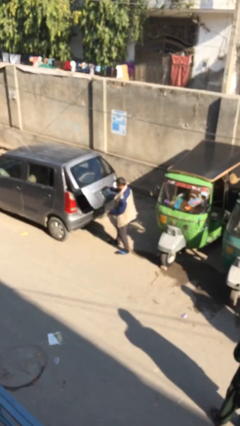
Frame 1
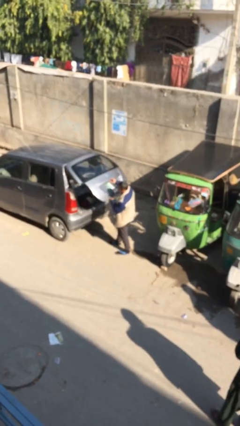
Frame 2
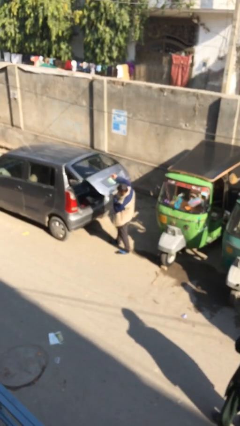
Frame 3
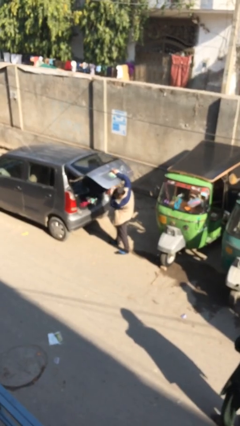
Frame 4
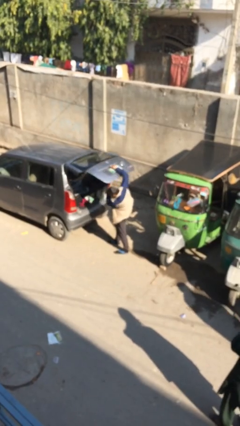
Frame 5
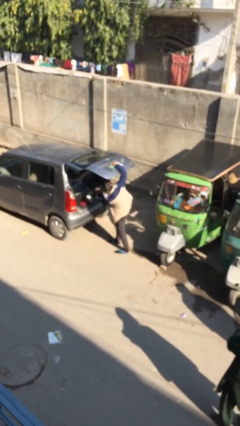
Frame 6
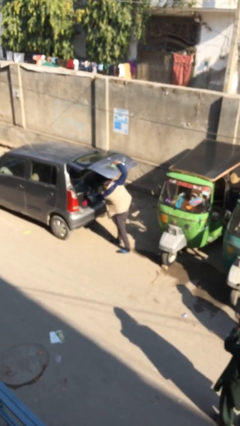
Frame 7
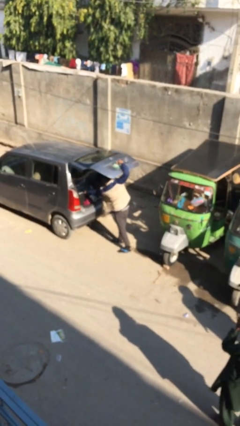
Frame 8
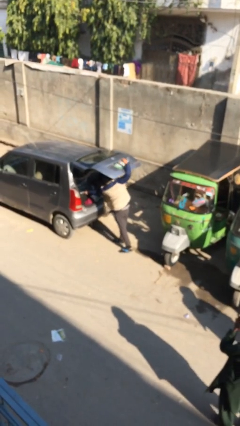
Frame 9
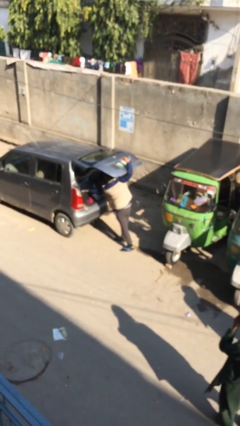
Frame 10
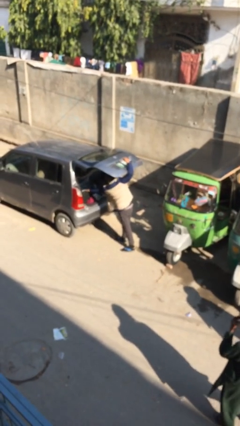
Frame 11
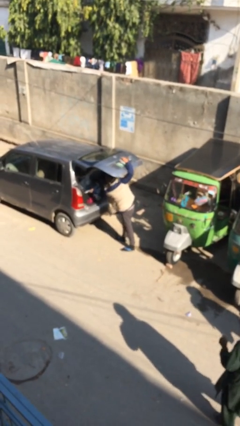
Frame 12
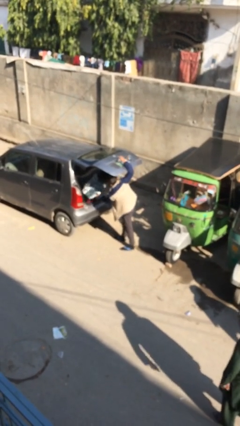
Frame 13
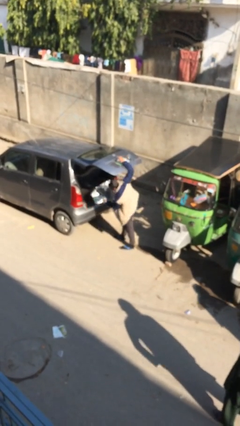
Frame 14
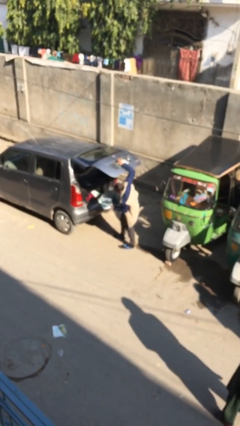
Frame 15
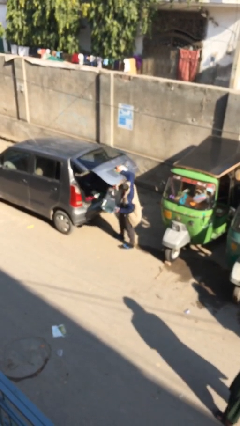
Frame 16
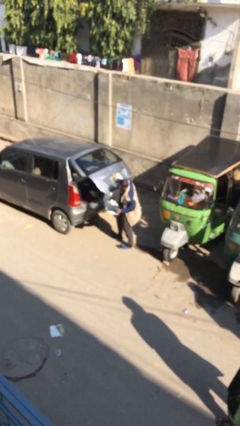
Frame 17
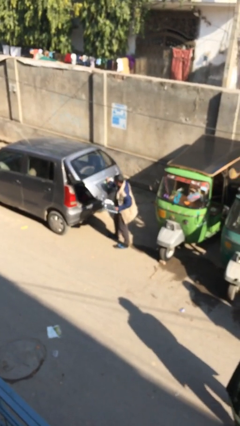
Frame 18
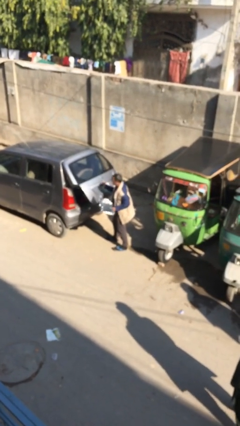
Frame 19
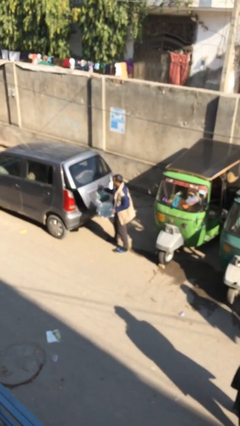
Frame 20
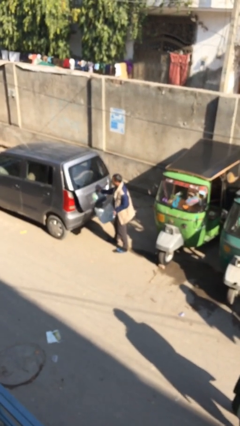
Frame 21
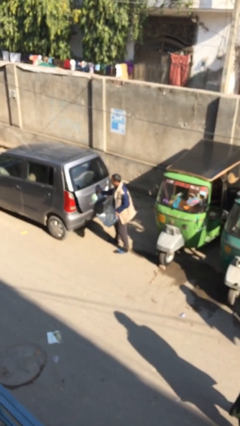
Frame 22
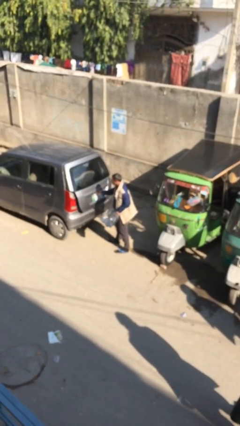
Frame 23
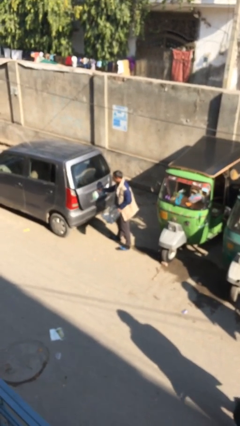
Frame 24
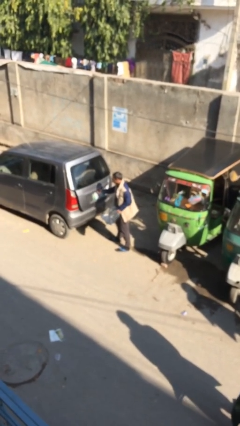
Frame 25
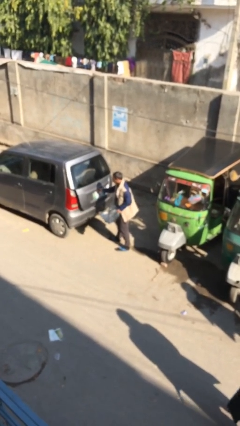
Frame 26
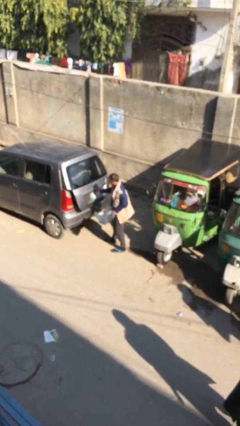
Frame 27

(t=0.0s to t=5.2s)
person unloads car

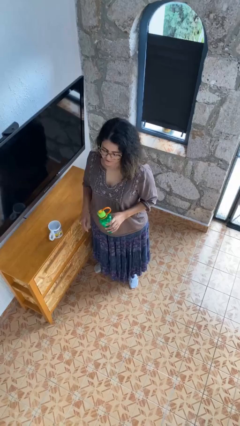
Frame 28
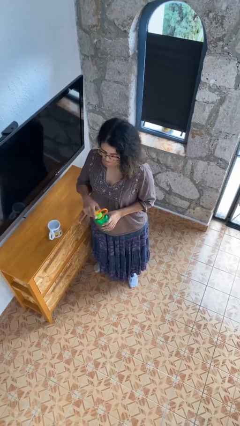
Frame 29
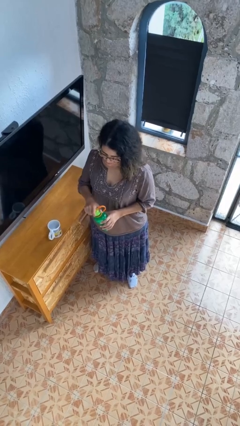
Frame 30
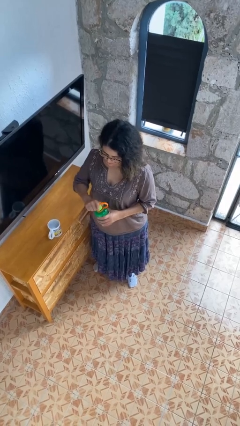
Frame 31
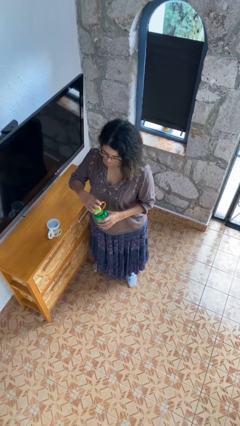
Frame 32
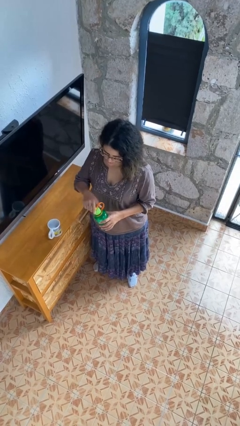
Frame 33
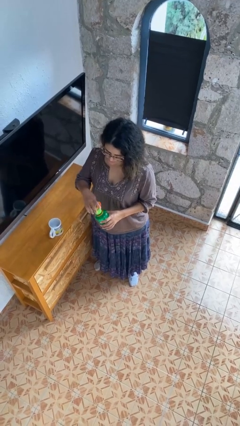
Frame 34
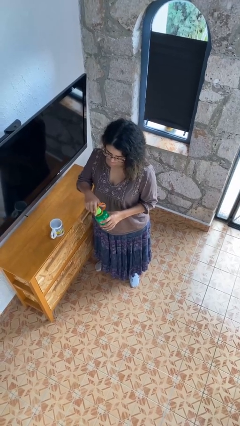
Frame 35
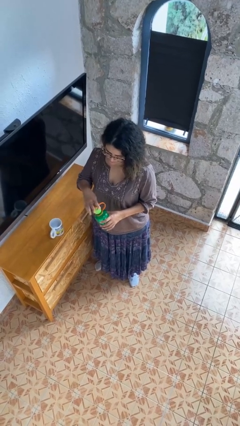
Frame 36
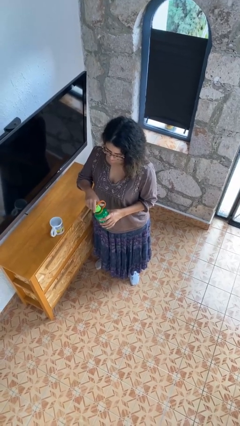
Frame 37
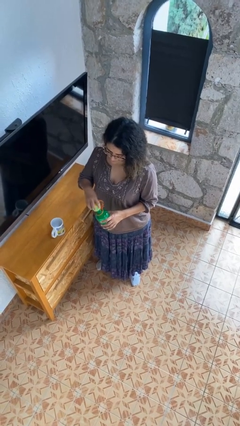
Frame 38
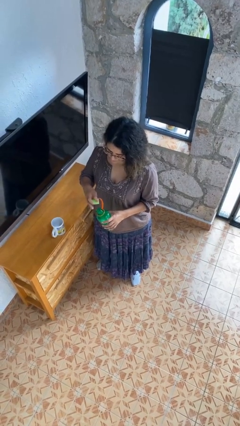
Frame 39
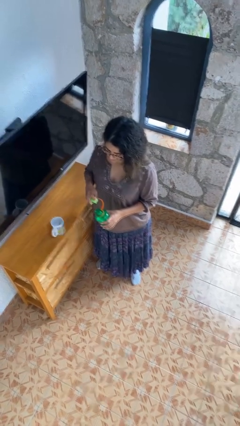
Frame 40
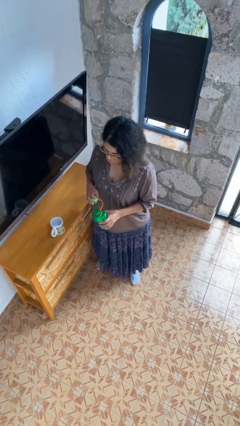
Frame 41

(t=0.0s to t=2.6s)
person unscrews lid from bottle

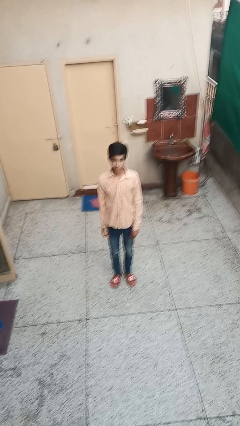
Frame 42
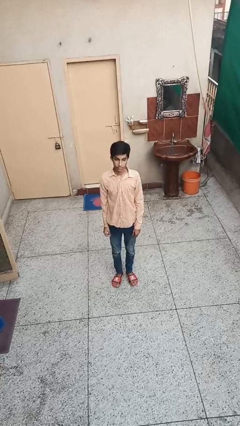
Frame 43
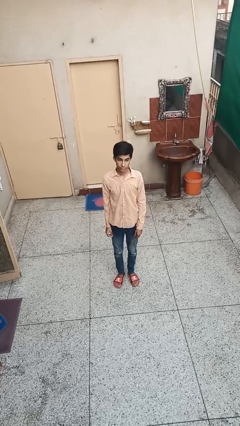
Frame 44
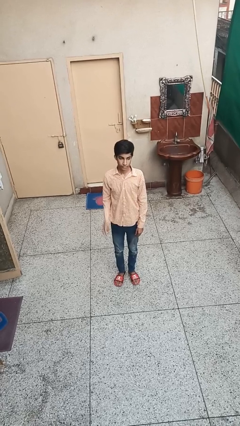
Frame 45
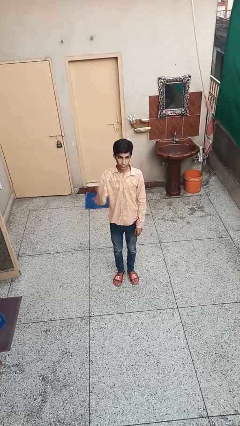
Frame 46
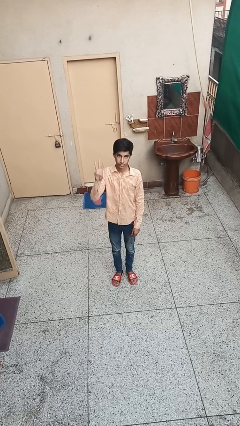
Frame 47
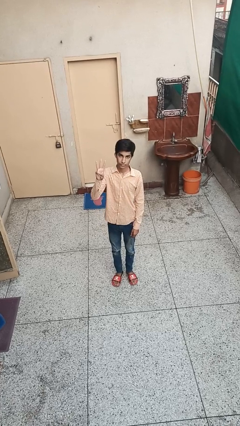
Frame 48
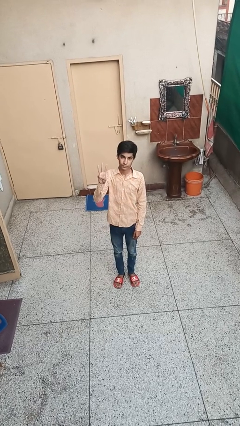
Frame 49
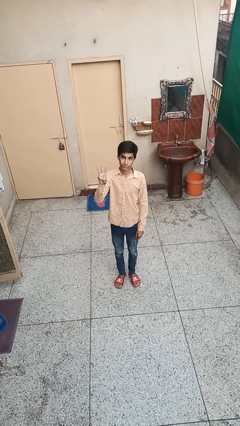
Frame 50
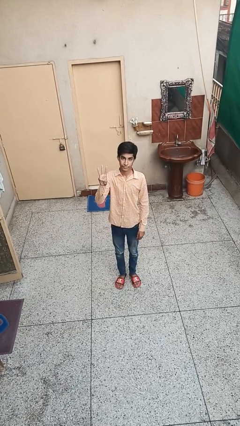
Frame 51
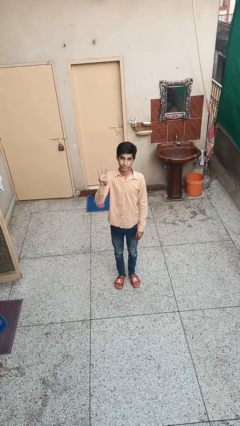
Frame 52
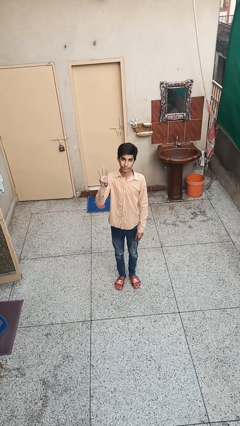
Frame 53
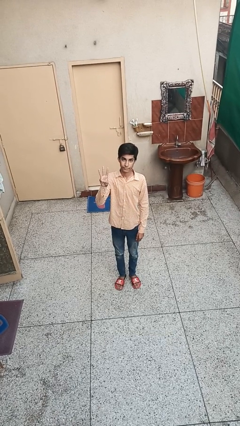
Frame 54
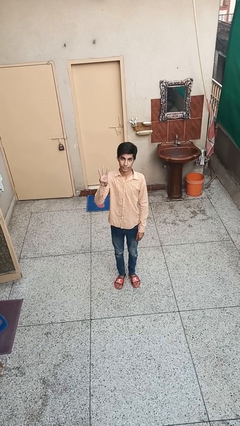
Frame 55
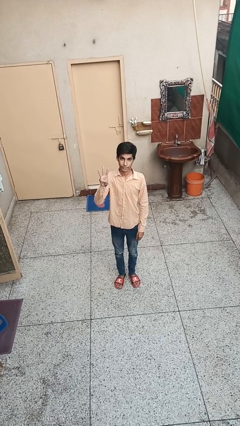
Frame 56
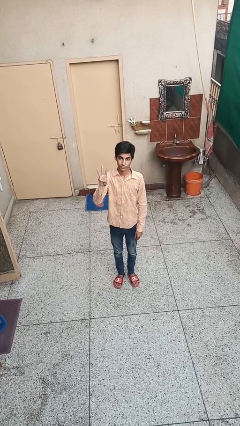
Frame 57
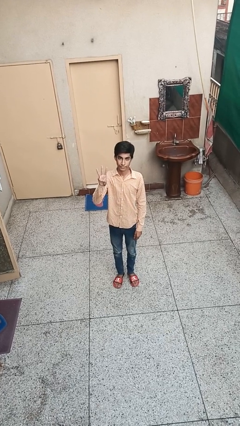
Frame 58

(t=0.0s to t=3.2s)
person gestures number three

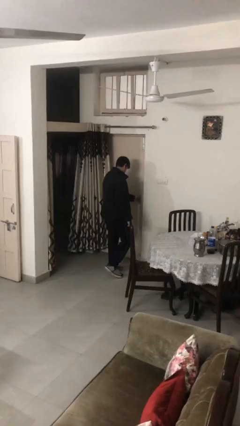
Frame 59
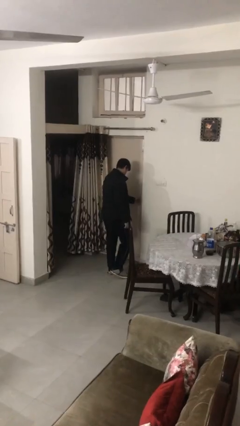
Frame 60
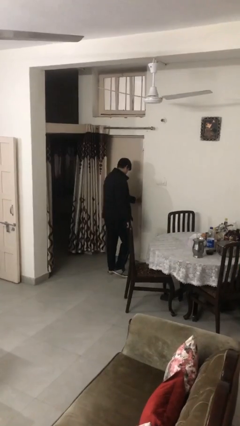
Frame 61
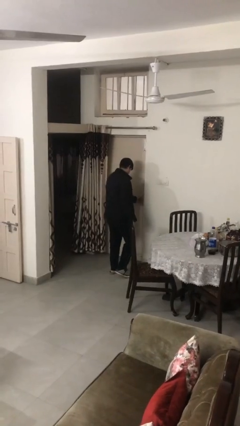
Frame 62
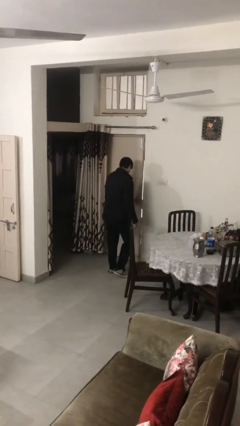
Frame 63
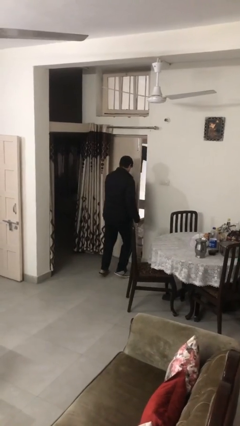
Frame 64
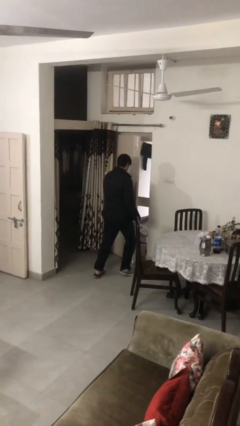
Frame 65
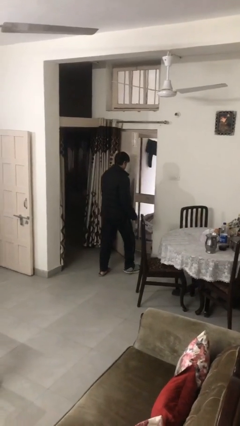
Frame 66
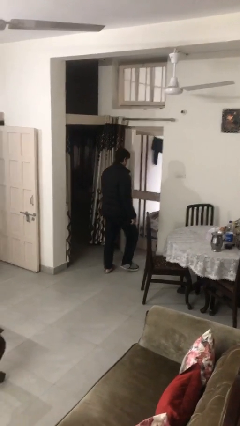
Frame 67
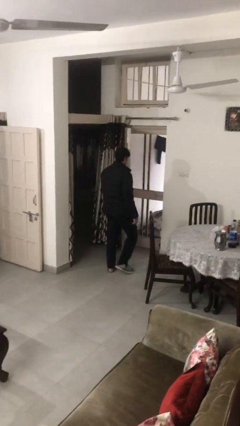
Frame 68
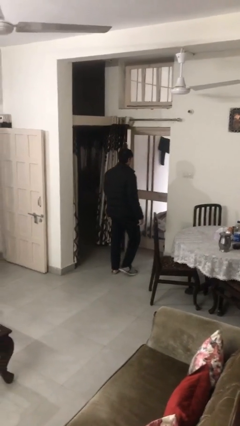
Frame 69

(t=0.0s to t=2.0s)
person opens facility door

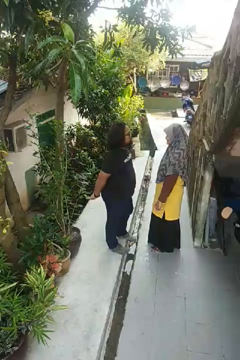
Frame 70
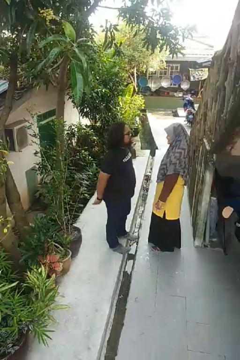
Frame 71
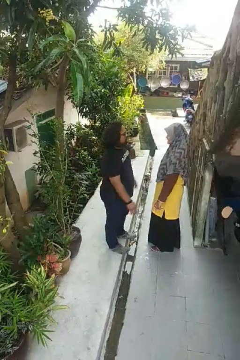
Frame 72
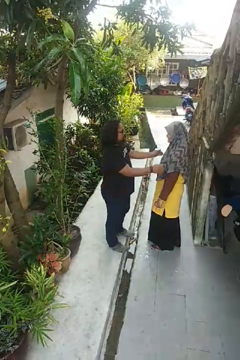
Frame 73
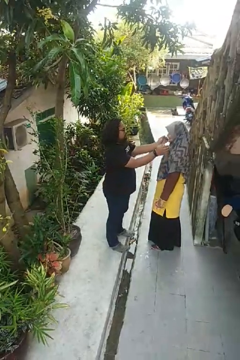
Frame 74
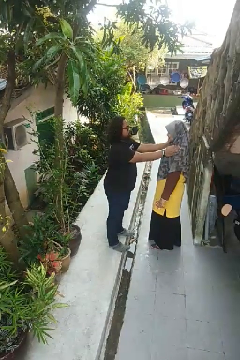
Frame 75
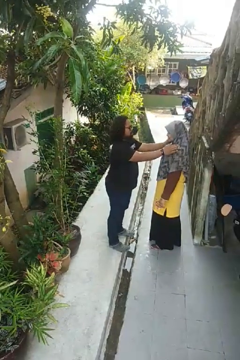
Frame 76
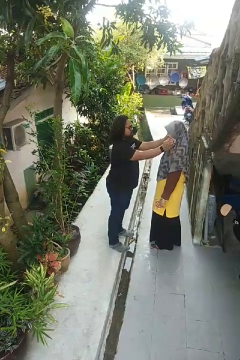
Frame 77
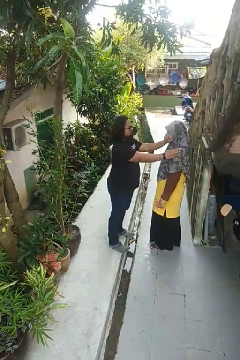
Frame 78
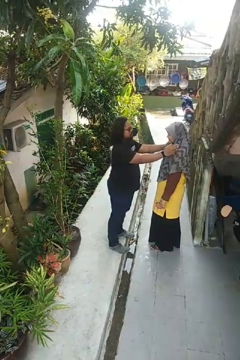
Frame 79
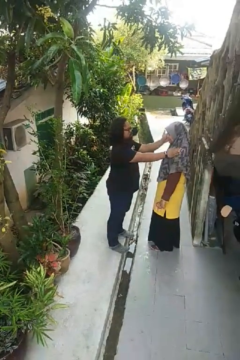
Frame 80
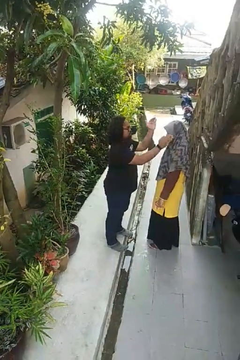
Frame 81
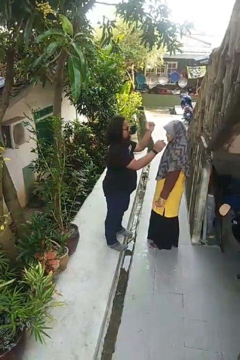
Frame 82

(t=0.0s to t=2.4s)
person pounds shoulders of person

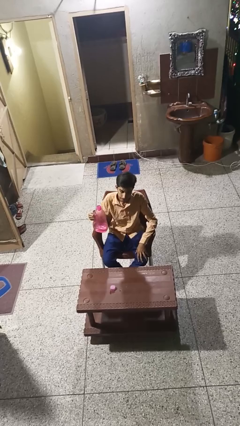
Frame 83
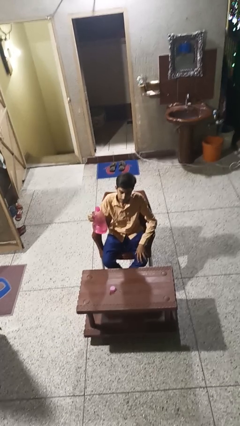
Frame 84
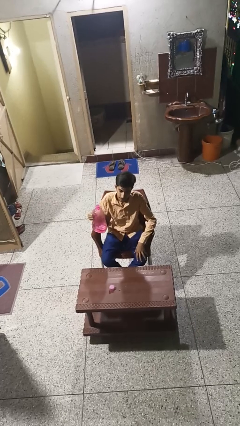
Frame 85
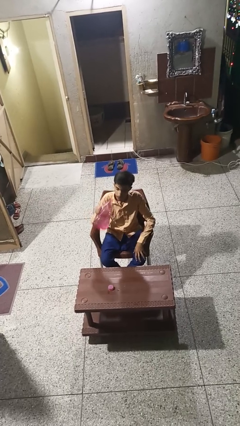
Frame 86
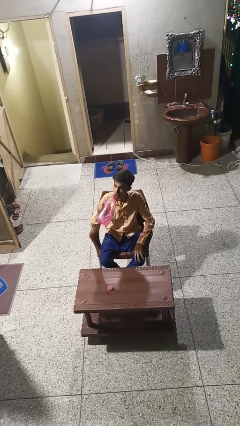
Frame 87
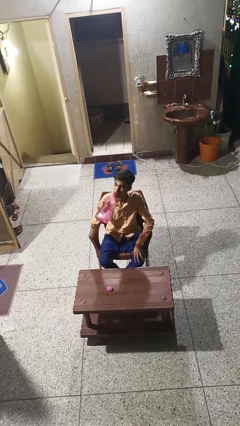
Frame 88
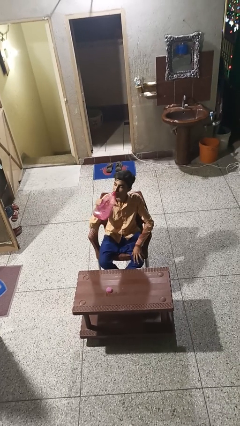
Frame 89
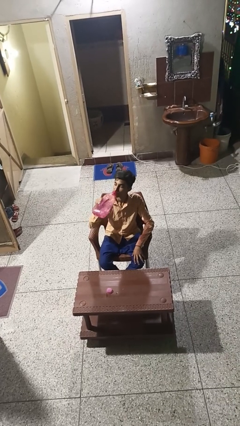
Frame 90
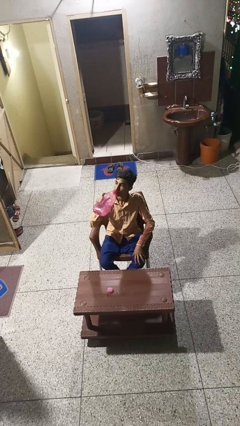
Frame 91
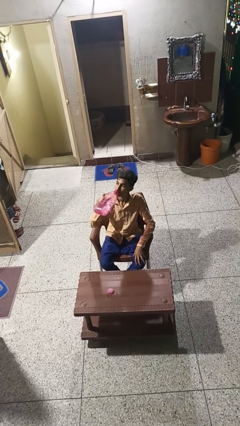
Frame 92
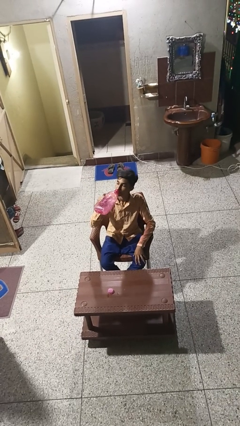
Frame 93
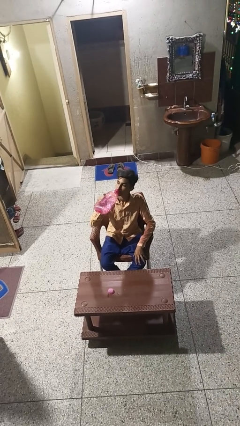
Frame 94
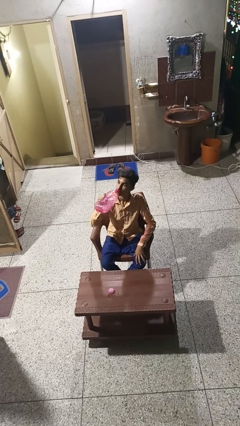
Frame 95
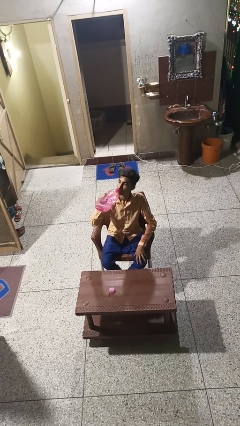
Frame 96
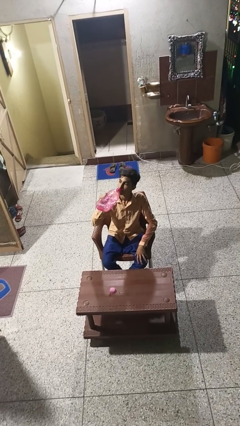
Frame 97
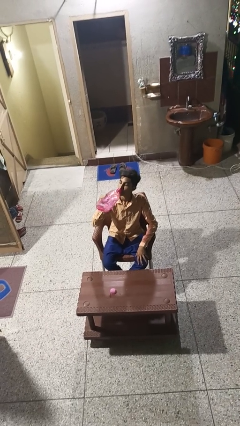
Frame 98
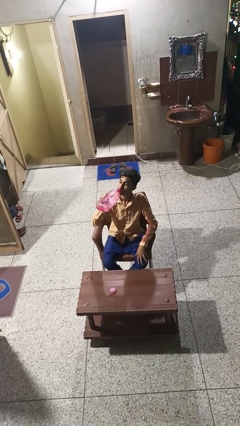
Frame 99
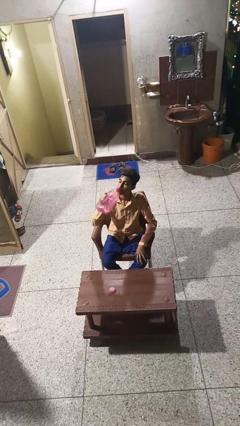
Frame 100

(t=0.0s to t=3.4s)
person drinks from bottle
